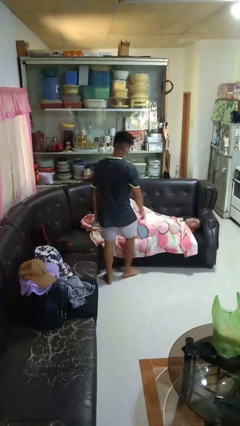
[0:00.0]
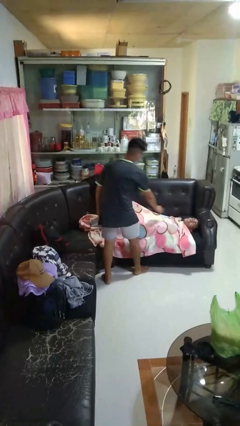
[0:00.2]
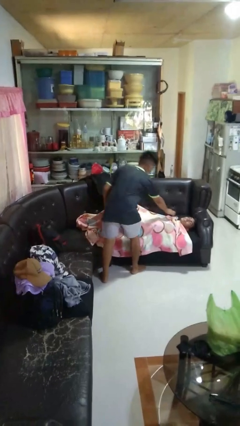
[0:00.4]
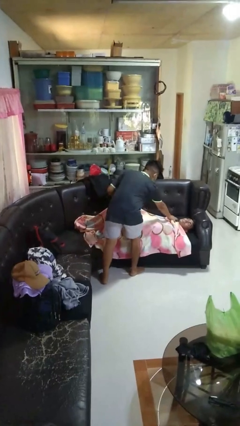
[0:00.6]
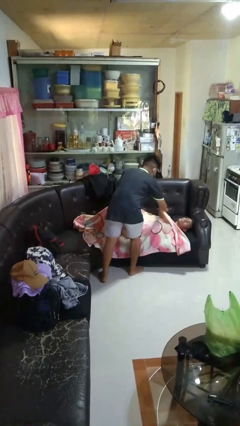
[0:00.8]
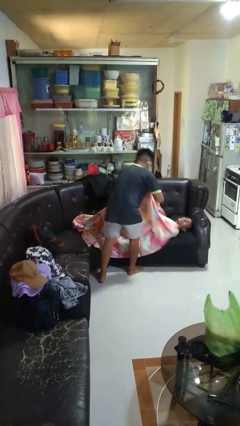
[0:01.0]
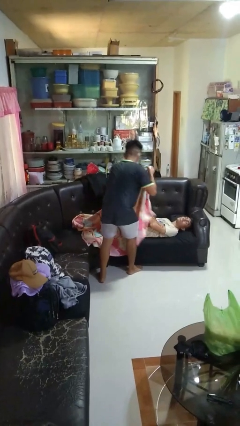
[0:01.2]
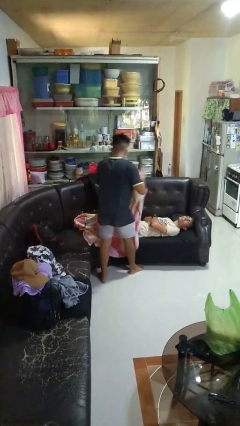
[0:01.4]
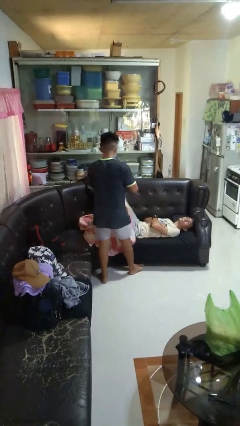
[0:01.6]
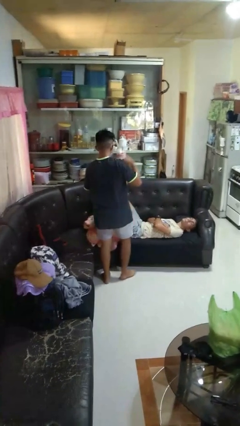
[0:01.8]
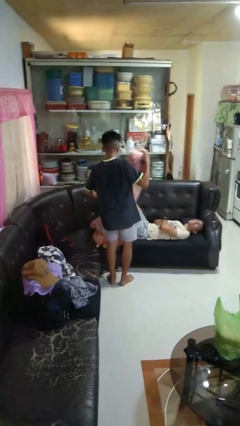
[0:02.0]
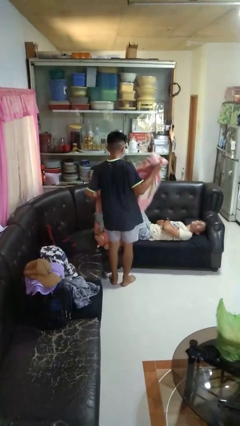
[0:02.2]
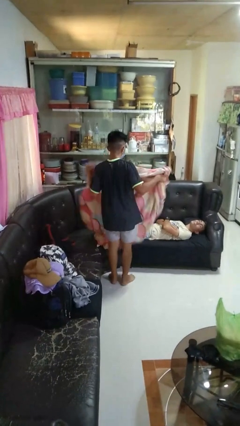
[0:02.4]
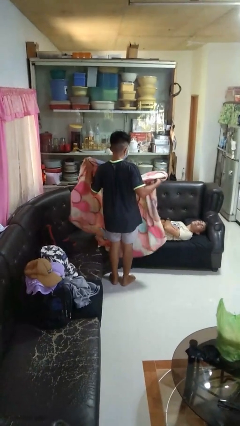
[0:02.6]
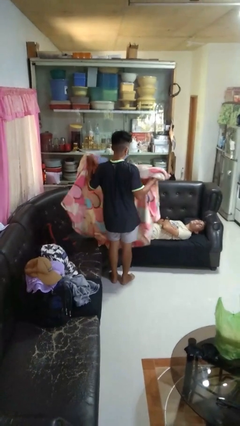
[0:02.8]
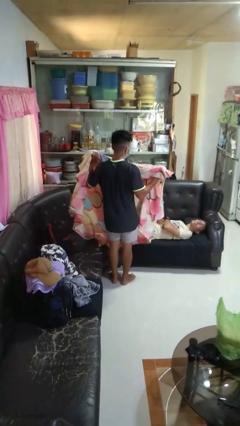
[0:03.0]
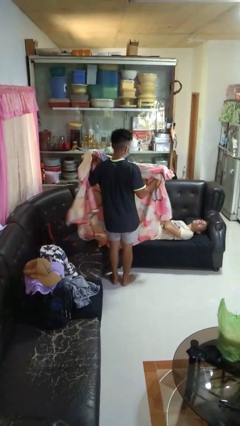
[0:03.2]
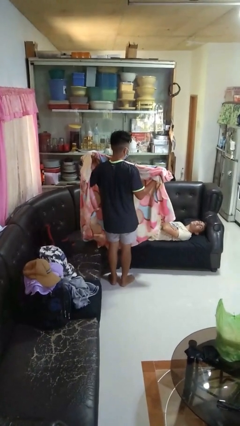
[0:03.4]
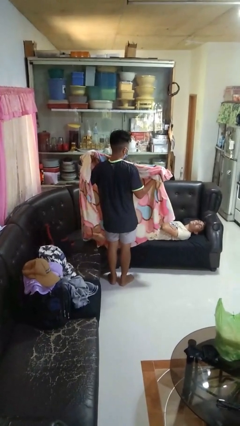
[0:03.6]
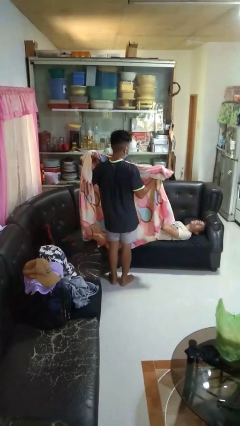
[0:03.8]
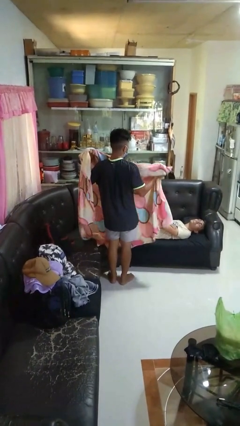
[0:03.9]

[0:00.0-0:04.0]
person uncovers friend with blanket

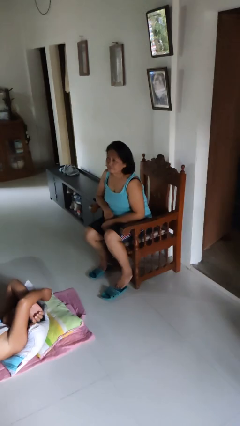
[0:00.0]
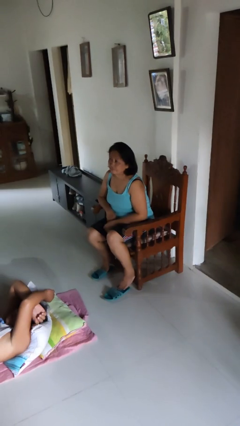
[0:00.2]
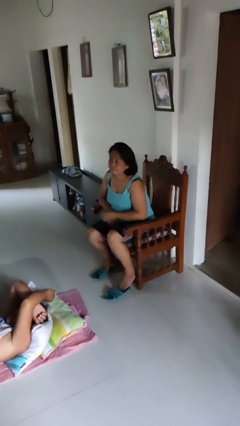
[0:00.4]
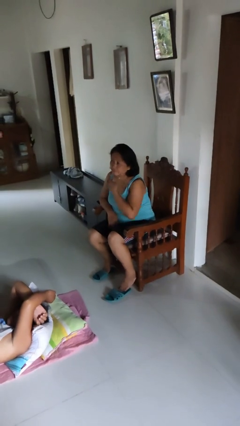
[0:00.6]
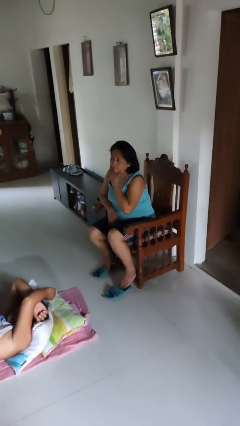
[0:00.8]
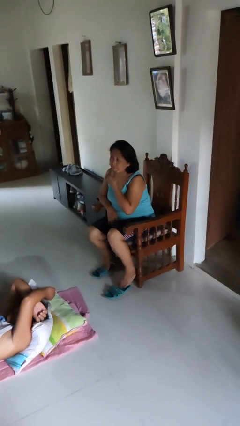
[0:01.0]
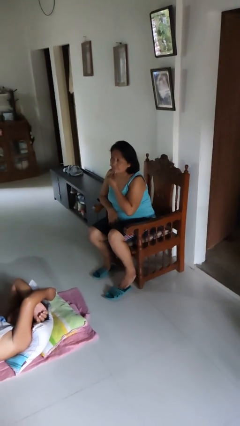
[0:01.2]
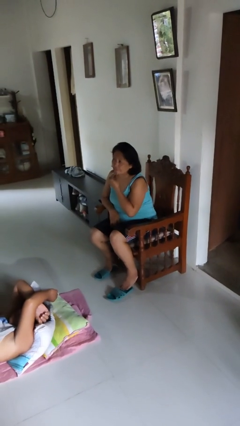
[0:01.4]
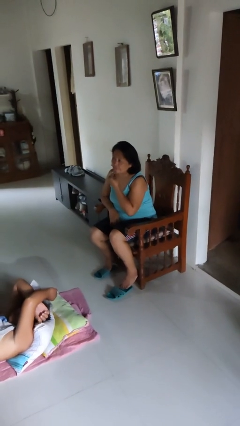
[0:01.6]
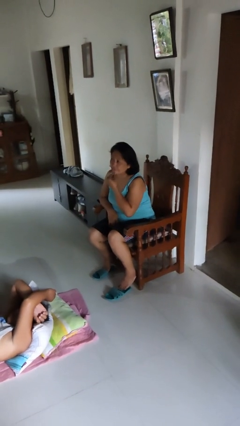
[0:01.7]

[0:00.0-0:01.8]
person strokes chin

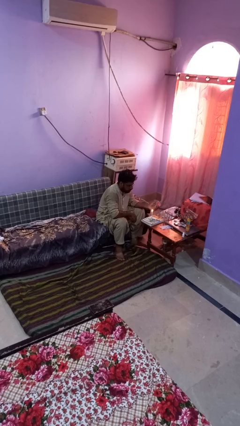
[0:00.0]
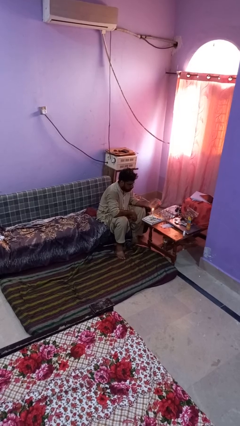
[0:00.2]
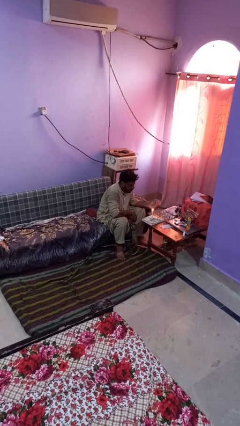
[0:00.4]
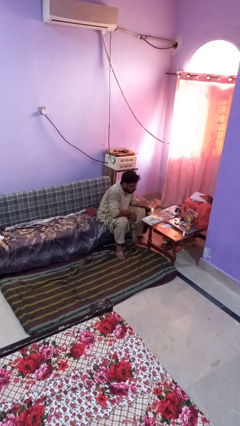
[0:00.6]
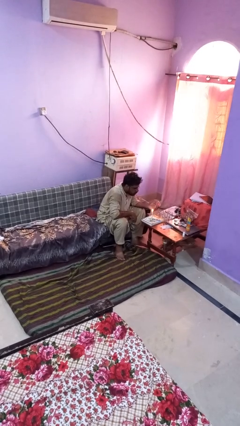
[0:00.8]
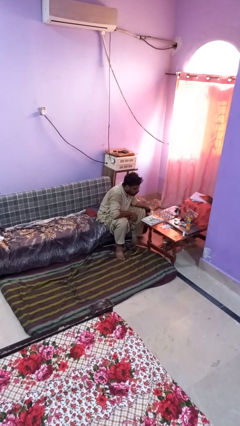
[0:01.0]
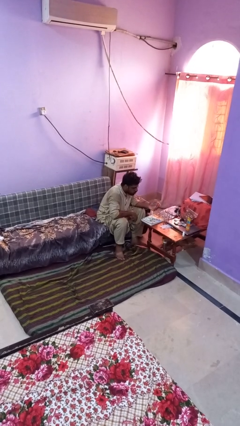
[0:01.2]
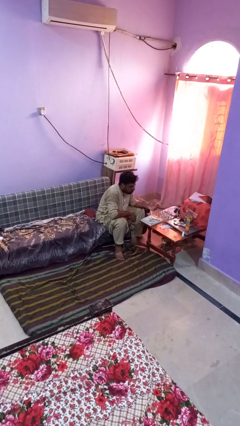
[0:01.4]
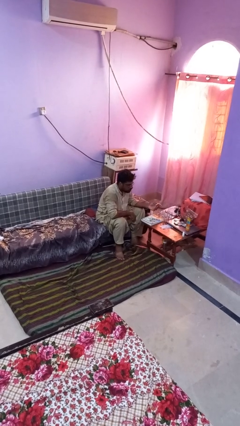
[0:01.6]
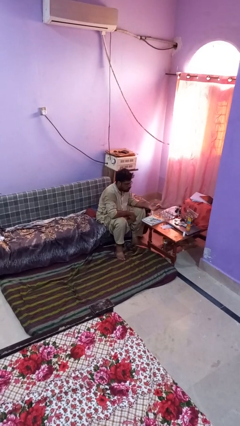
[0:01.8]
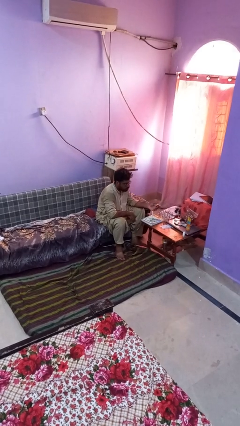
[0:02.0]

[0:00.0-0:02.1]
person extinguishes candle

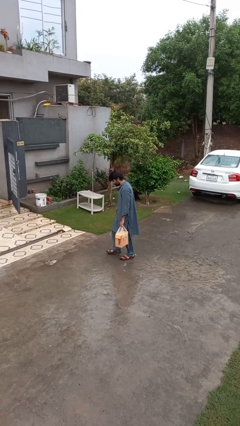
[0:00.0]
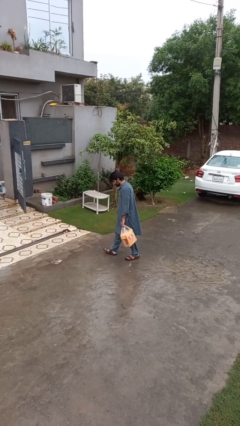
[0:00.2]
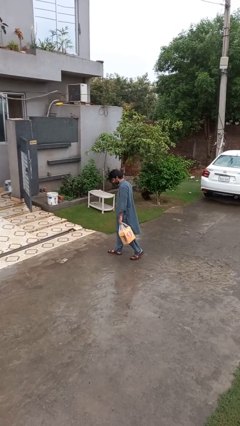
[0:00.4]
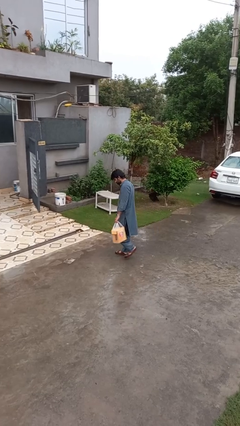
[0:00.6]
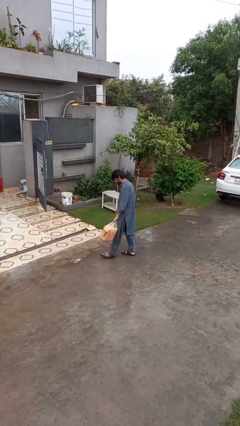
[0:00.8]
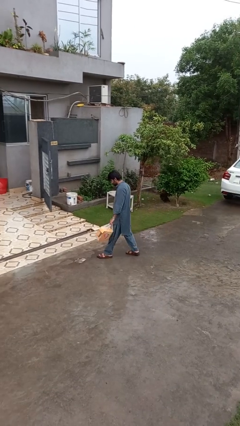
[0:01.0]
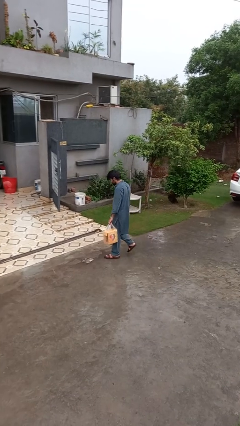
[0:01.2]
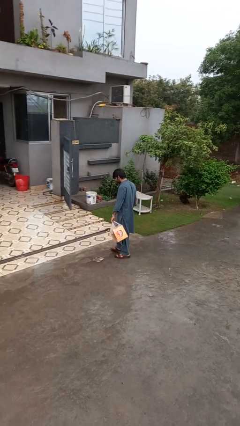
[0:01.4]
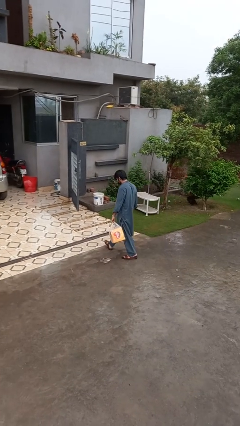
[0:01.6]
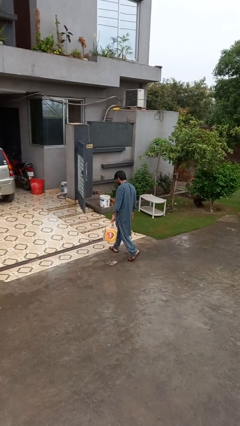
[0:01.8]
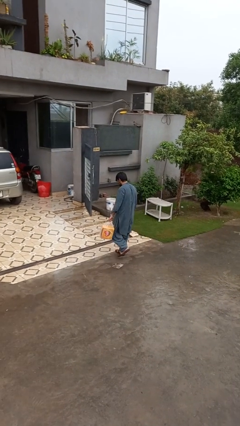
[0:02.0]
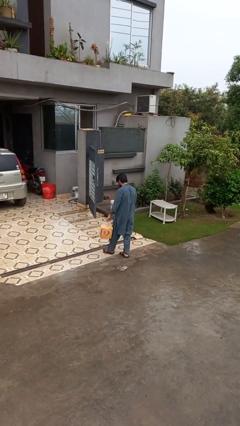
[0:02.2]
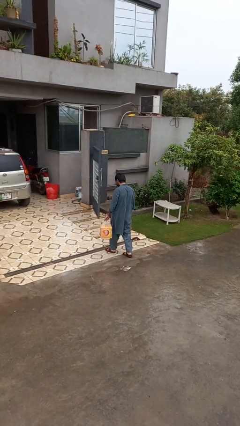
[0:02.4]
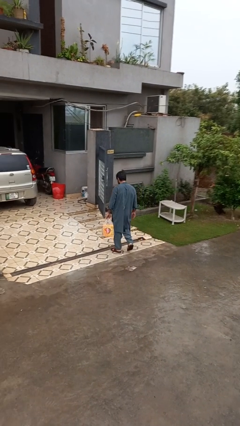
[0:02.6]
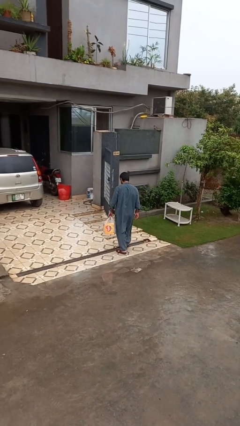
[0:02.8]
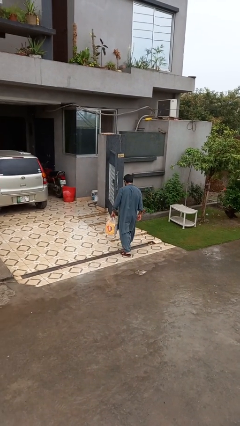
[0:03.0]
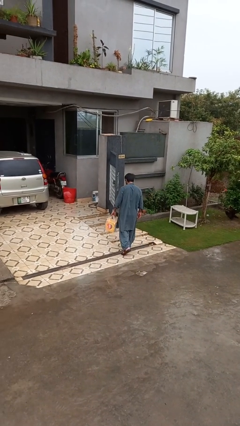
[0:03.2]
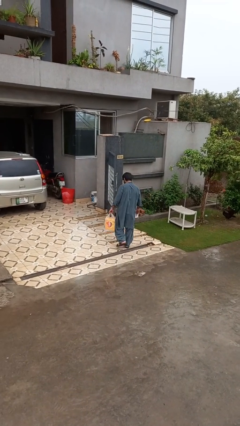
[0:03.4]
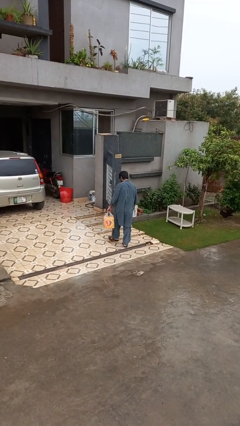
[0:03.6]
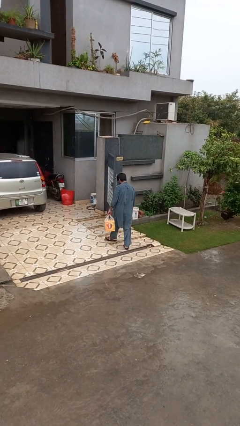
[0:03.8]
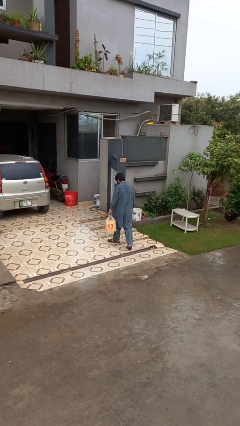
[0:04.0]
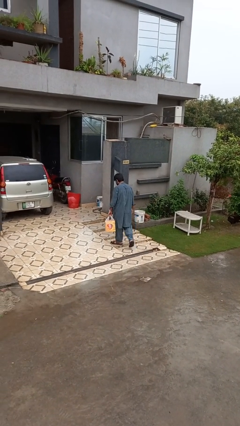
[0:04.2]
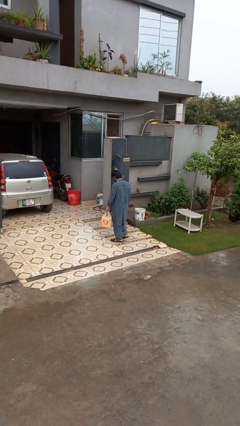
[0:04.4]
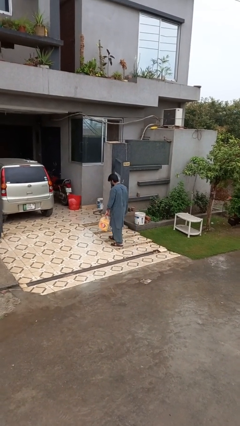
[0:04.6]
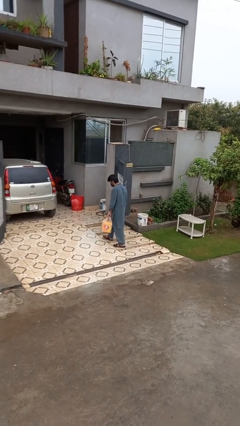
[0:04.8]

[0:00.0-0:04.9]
person carries groceries

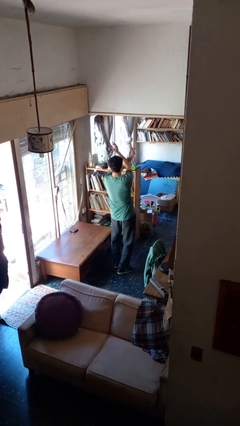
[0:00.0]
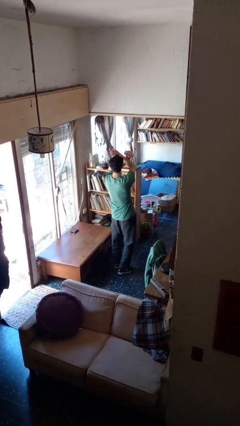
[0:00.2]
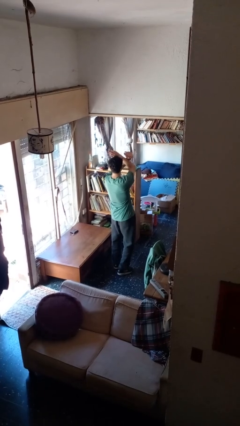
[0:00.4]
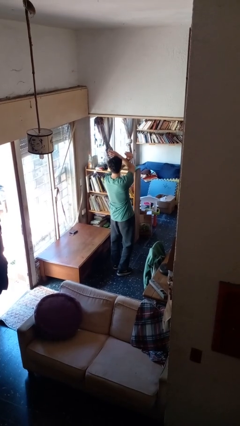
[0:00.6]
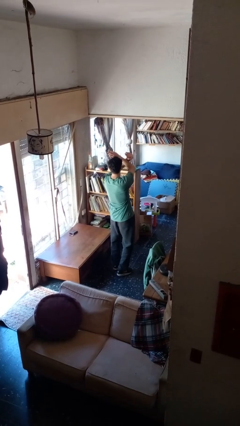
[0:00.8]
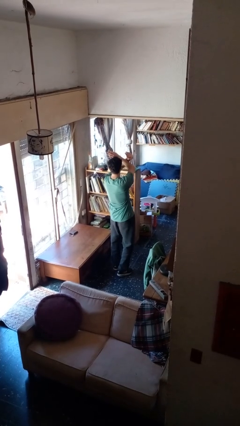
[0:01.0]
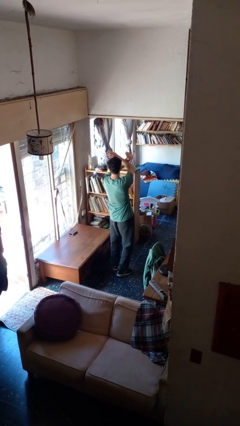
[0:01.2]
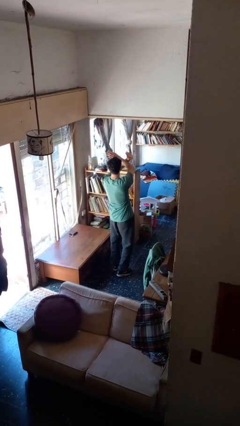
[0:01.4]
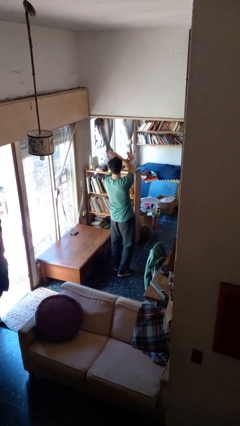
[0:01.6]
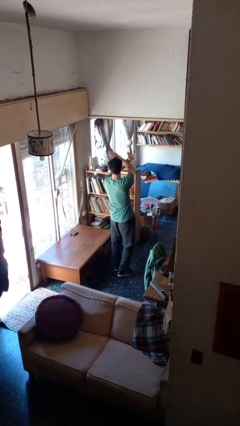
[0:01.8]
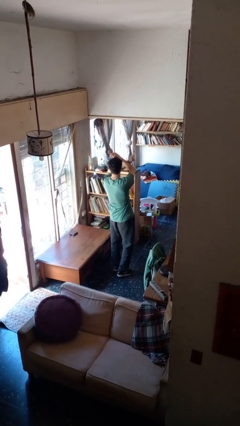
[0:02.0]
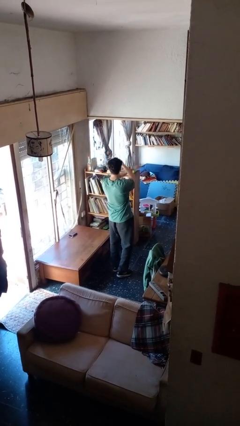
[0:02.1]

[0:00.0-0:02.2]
person gestures arms x

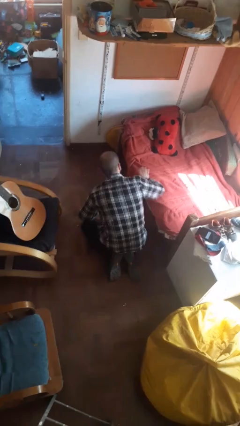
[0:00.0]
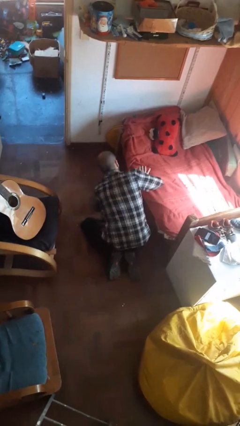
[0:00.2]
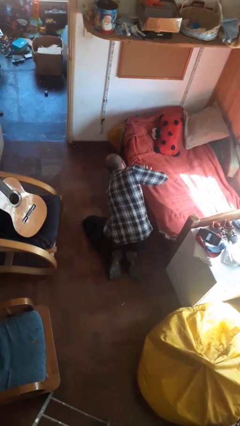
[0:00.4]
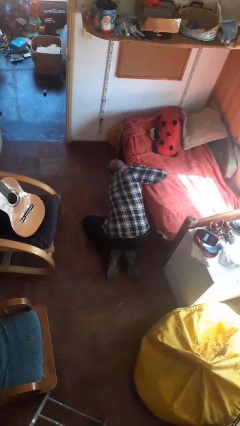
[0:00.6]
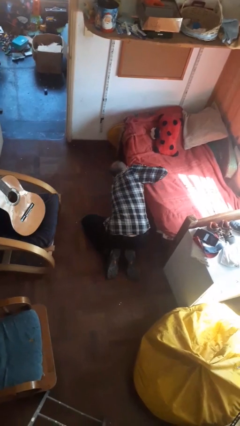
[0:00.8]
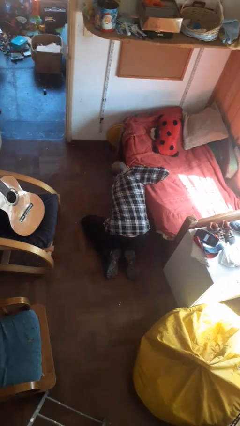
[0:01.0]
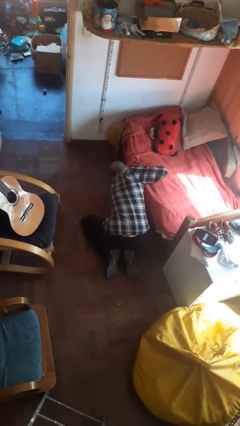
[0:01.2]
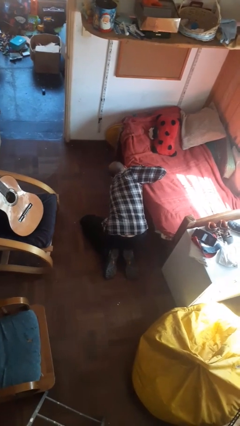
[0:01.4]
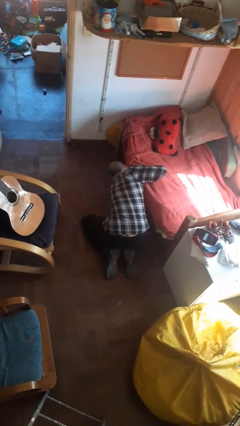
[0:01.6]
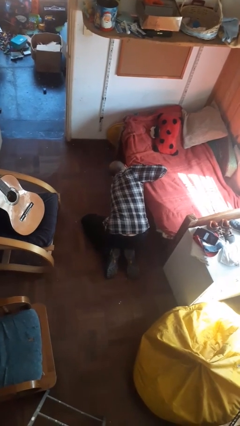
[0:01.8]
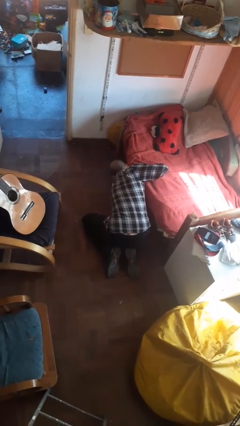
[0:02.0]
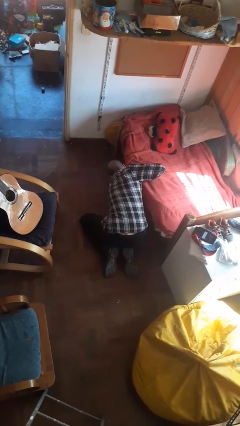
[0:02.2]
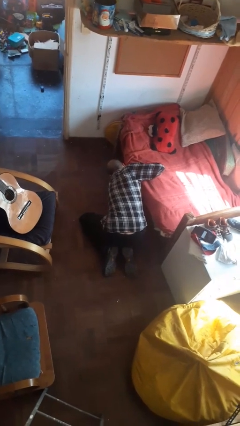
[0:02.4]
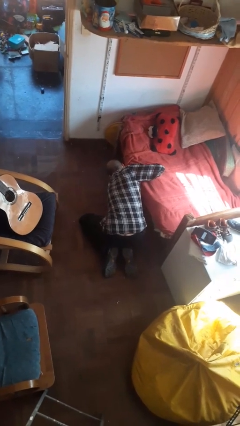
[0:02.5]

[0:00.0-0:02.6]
person searches under bed
